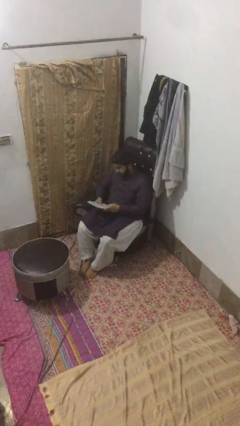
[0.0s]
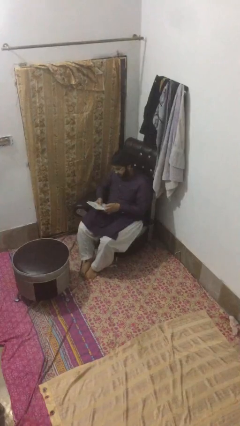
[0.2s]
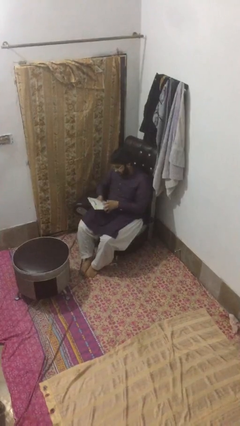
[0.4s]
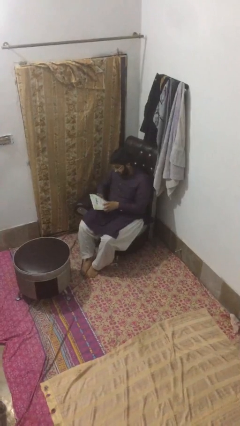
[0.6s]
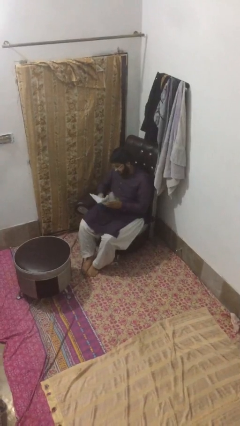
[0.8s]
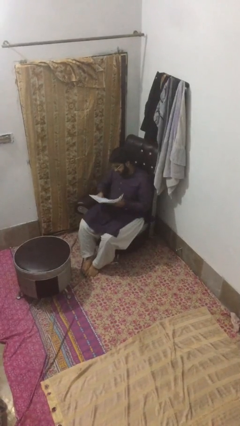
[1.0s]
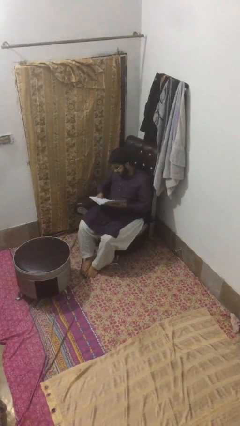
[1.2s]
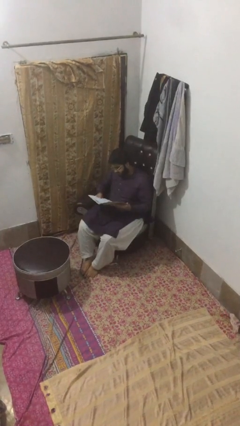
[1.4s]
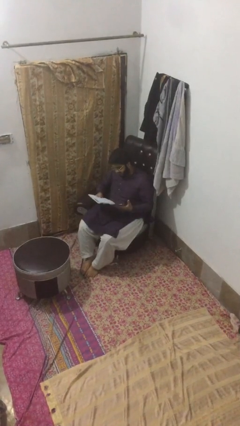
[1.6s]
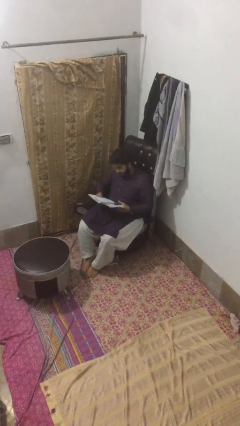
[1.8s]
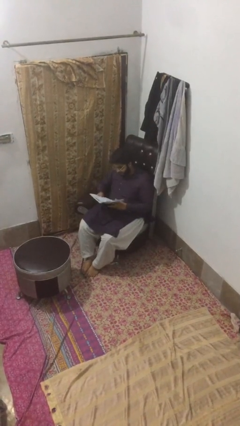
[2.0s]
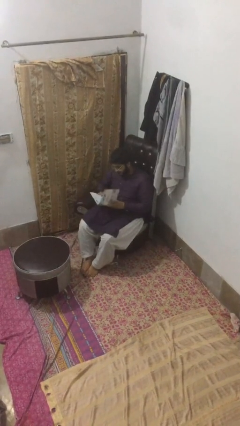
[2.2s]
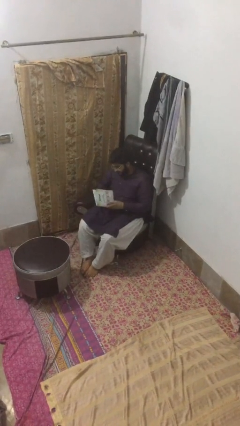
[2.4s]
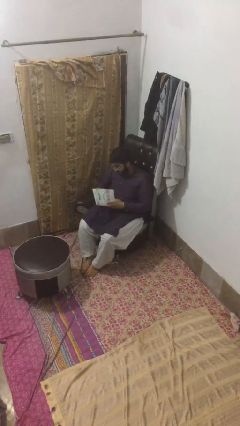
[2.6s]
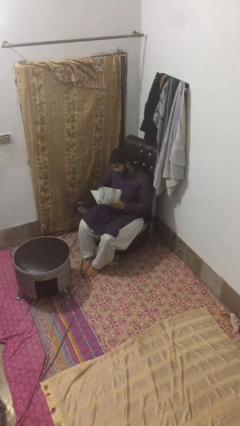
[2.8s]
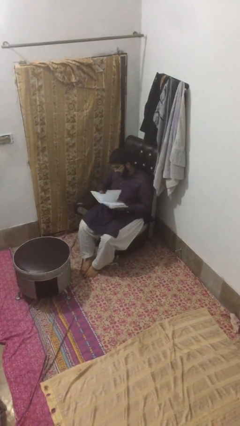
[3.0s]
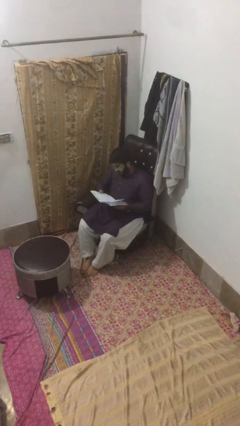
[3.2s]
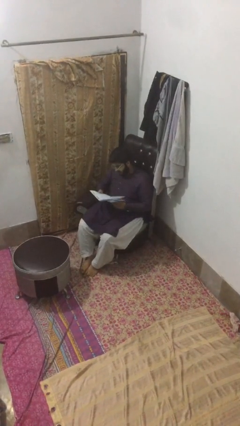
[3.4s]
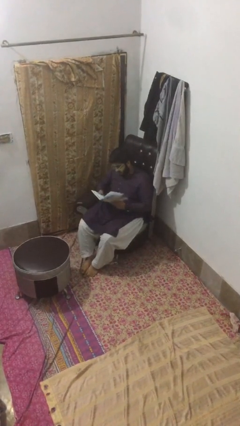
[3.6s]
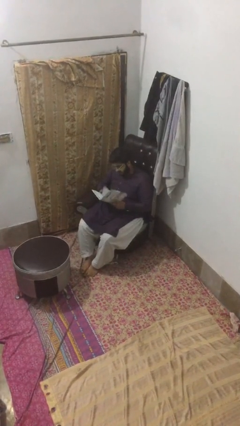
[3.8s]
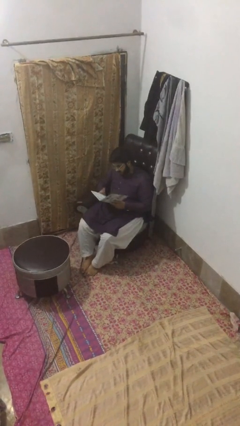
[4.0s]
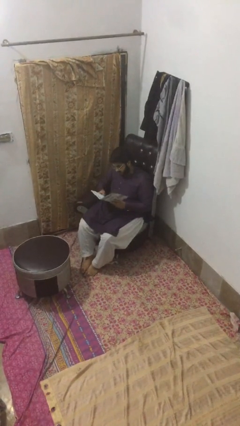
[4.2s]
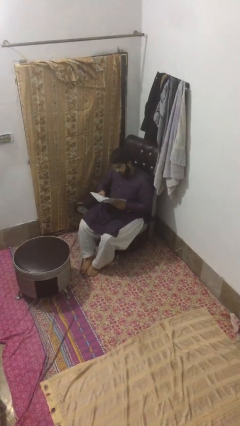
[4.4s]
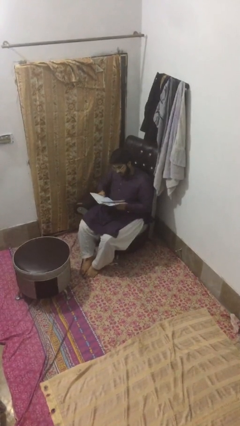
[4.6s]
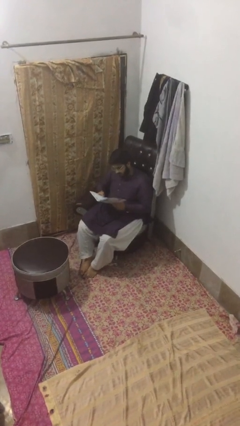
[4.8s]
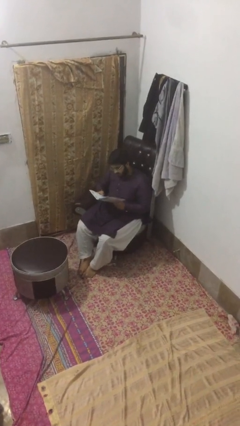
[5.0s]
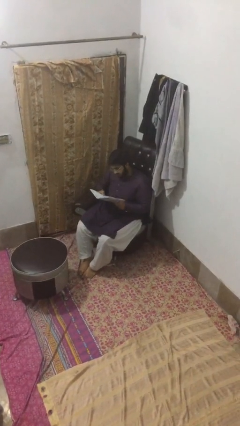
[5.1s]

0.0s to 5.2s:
person reads document

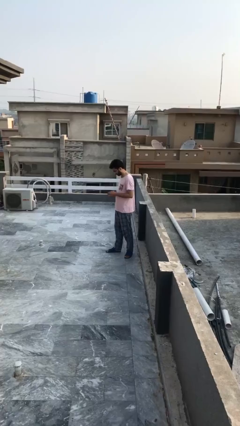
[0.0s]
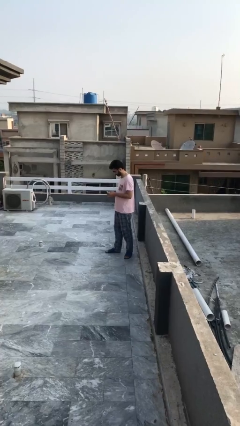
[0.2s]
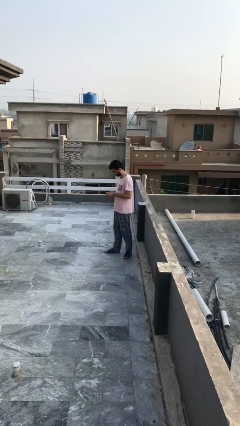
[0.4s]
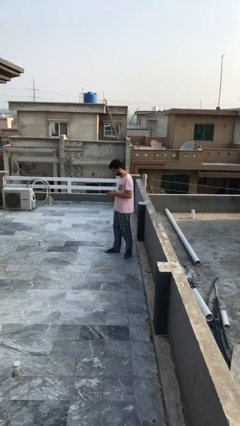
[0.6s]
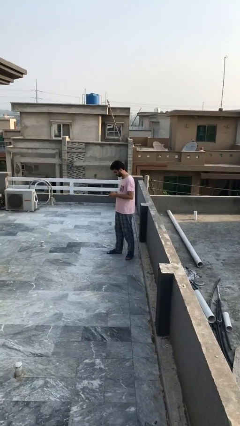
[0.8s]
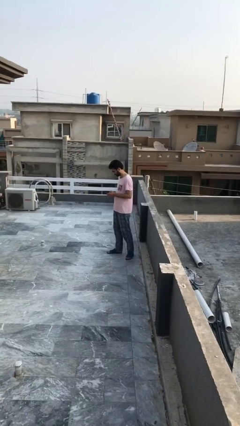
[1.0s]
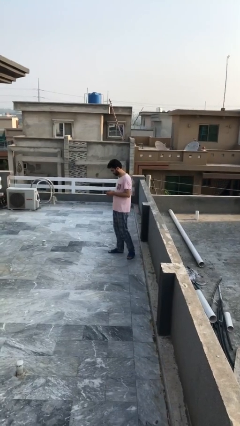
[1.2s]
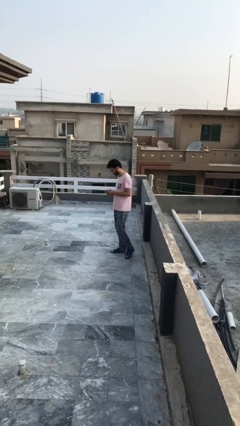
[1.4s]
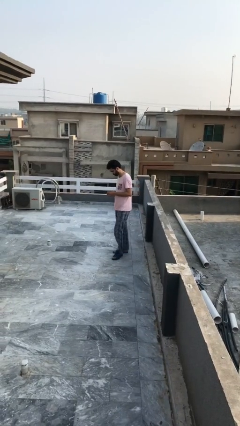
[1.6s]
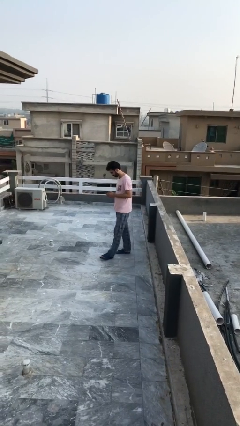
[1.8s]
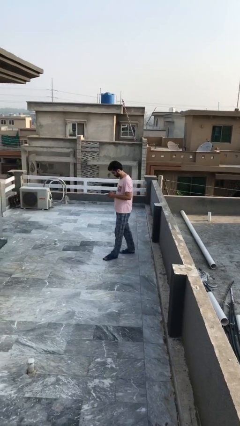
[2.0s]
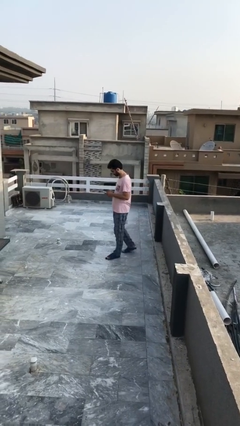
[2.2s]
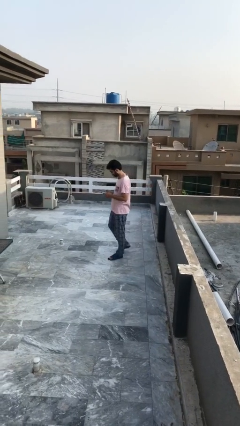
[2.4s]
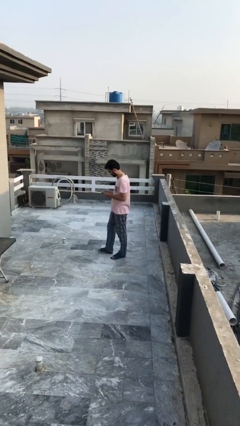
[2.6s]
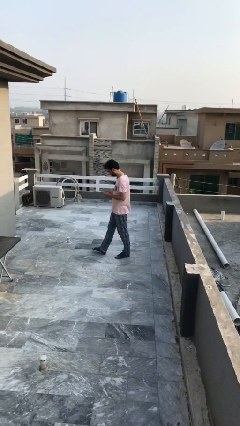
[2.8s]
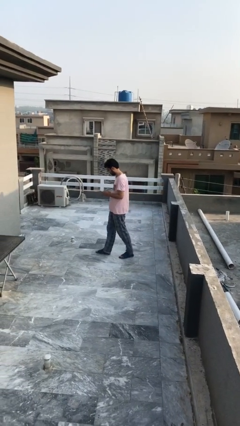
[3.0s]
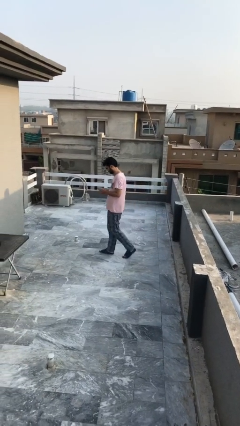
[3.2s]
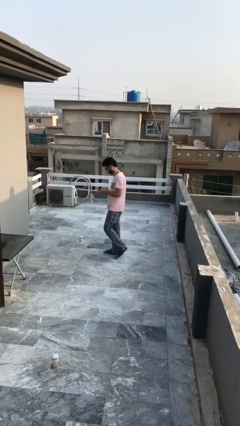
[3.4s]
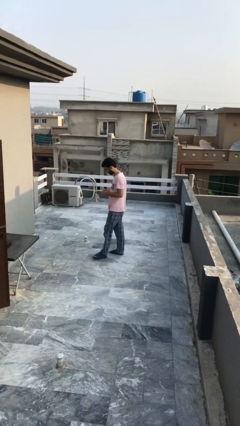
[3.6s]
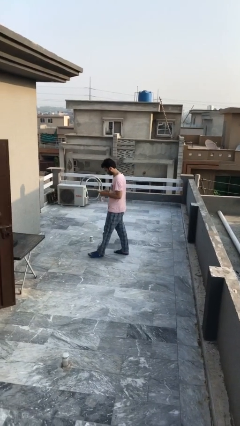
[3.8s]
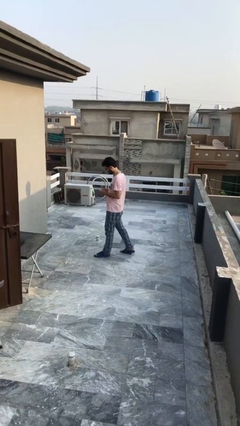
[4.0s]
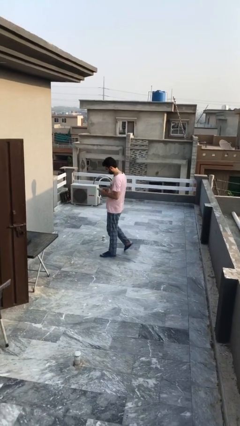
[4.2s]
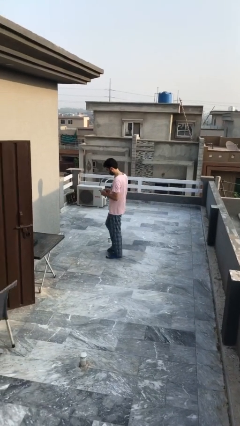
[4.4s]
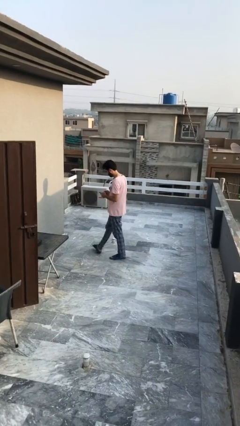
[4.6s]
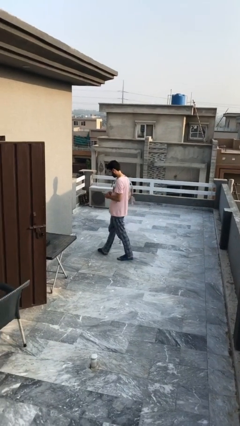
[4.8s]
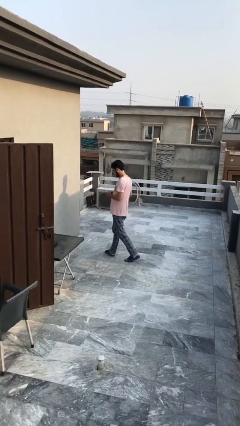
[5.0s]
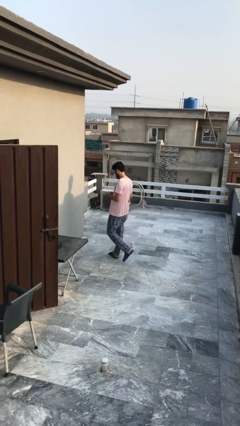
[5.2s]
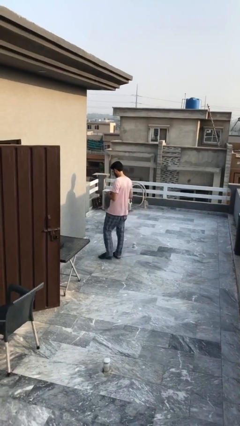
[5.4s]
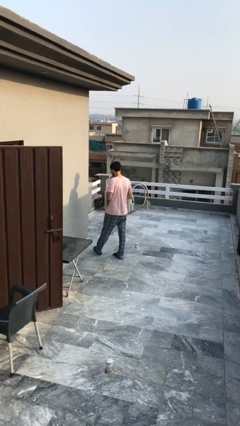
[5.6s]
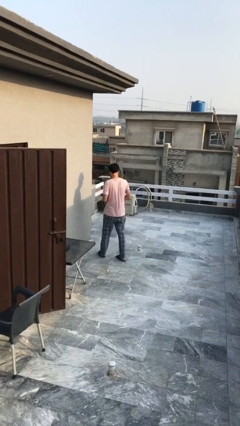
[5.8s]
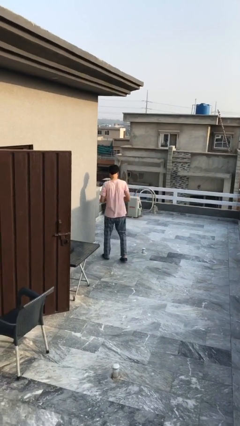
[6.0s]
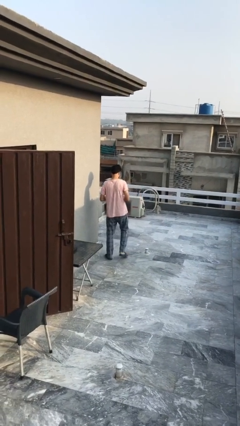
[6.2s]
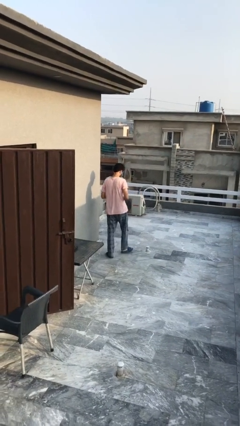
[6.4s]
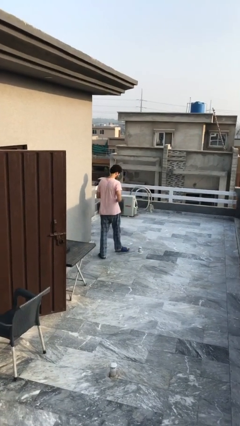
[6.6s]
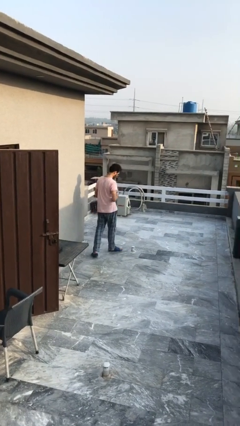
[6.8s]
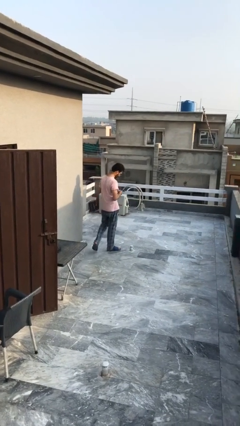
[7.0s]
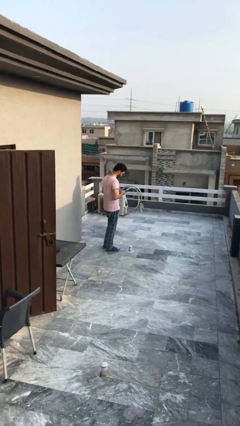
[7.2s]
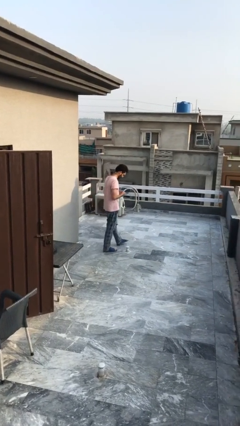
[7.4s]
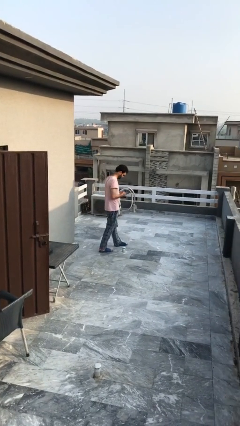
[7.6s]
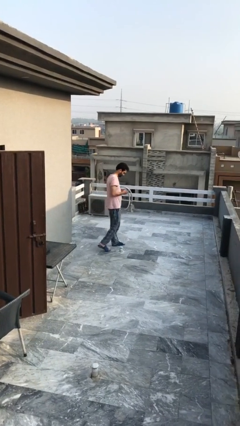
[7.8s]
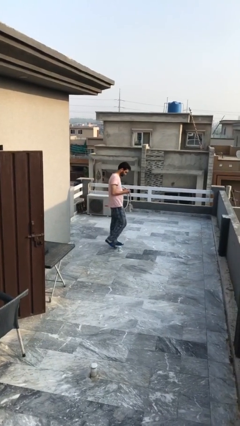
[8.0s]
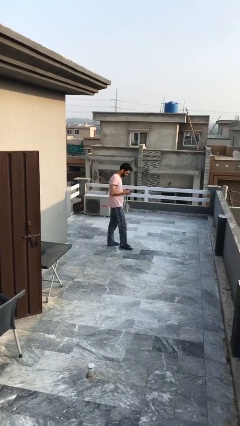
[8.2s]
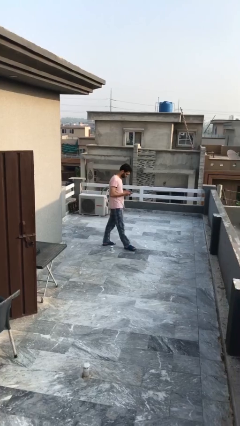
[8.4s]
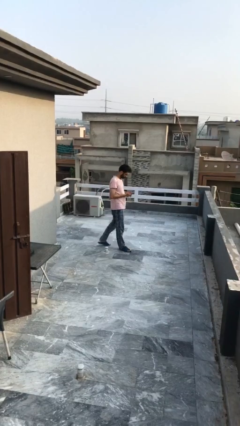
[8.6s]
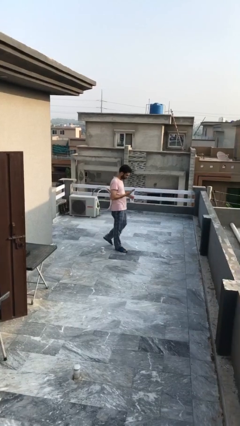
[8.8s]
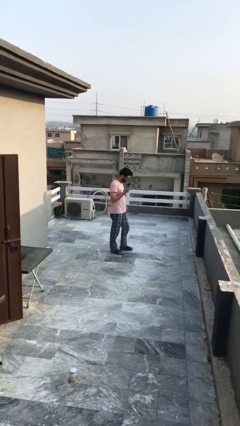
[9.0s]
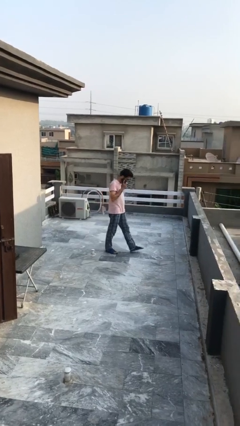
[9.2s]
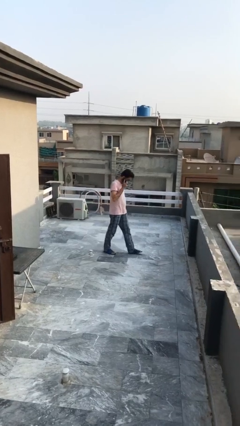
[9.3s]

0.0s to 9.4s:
person texts on phone

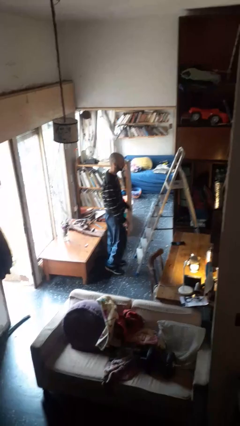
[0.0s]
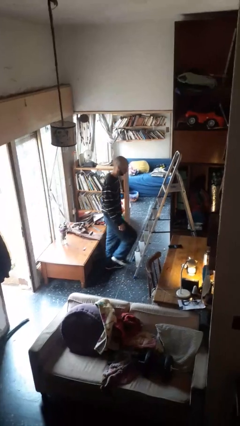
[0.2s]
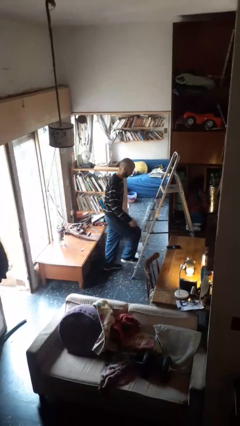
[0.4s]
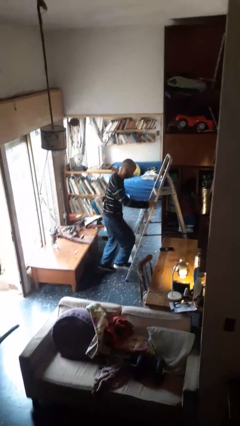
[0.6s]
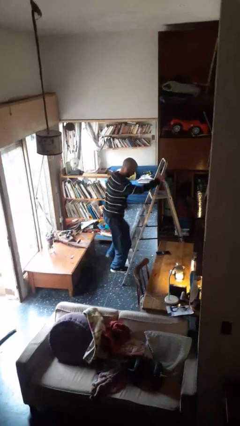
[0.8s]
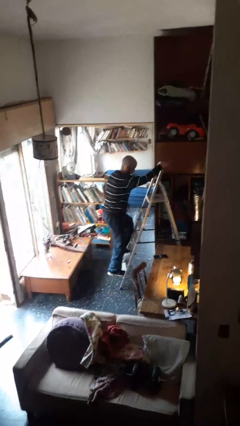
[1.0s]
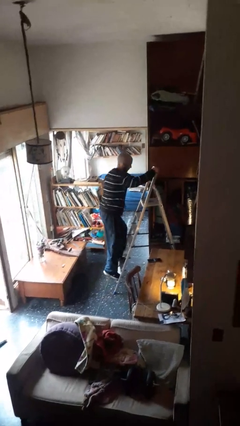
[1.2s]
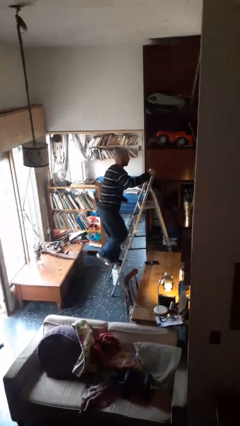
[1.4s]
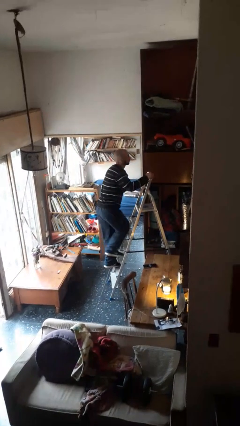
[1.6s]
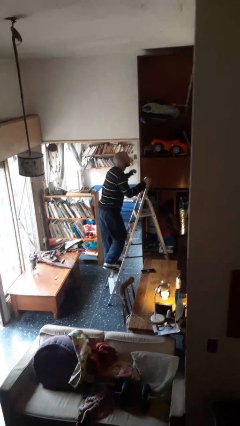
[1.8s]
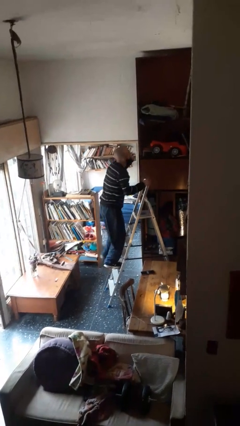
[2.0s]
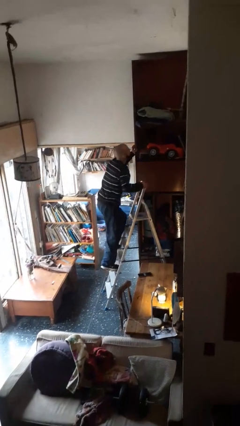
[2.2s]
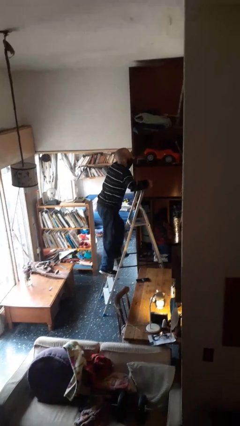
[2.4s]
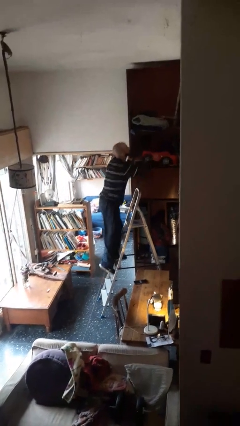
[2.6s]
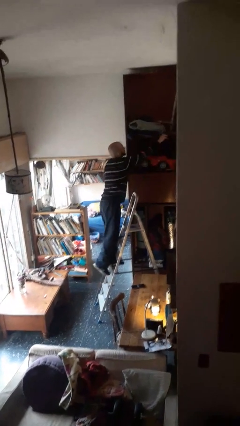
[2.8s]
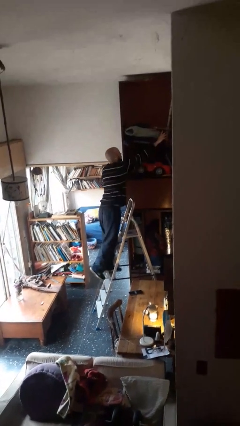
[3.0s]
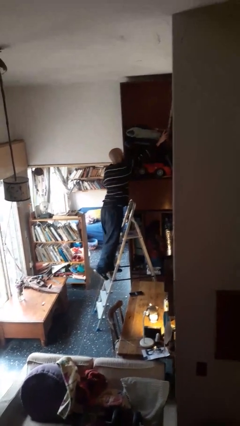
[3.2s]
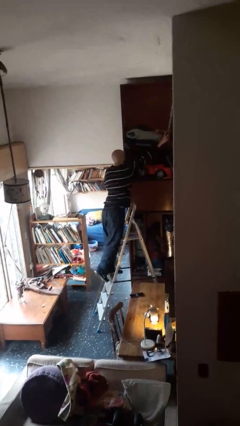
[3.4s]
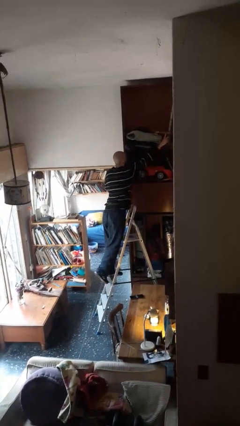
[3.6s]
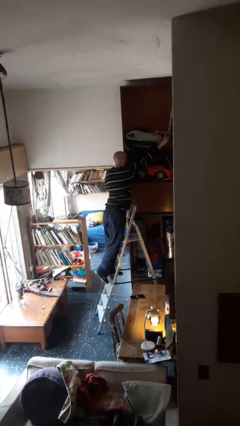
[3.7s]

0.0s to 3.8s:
person climbs up ladder
